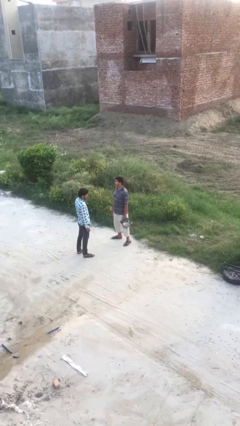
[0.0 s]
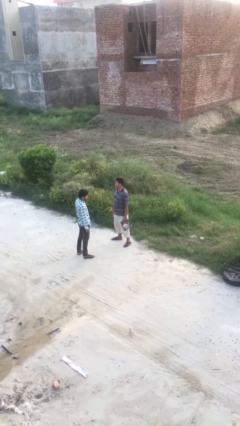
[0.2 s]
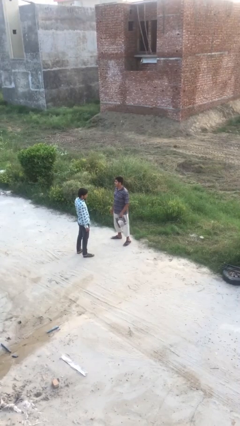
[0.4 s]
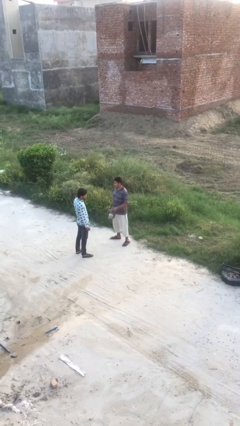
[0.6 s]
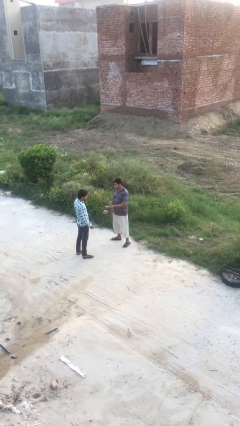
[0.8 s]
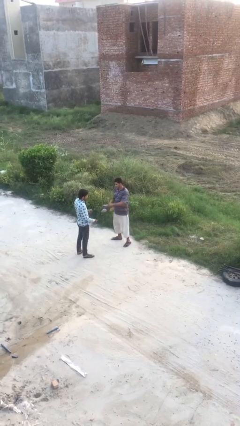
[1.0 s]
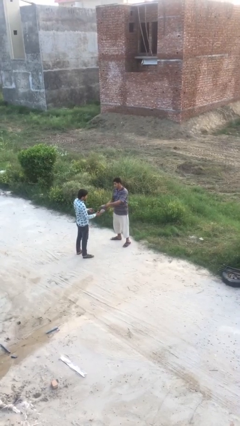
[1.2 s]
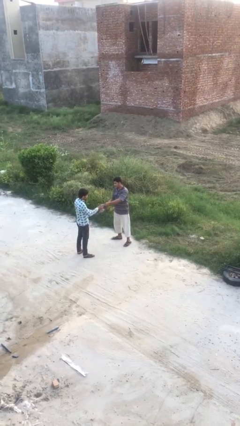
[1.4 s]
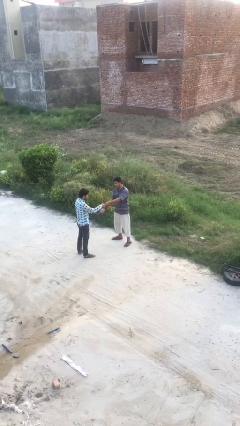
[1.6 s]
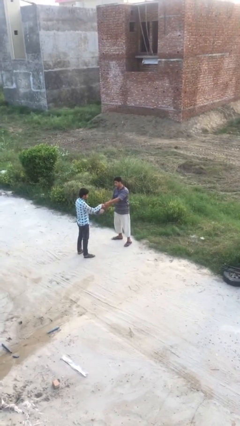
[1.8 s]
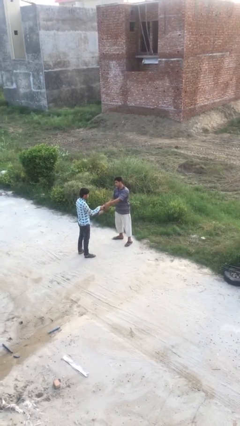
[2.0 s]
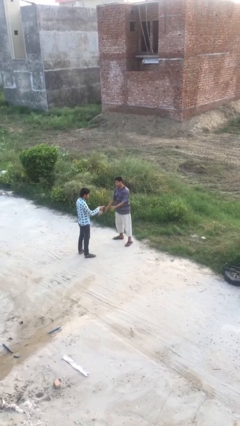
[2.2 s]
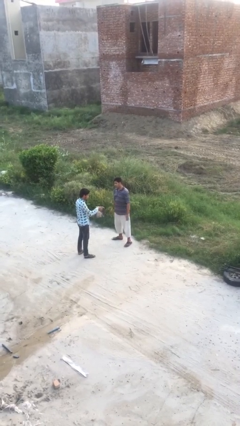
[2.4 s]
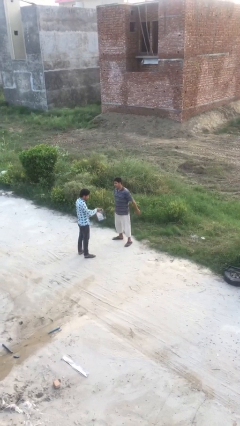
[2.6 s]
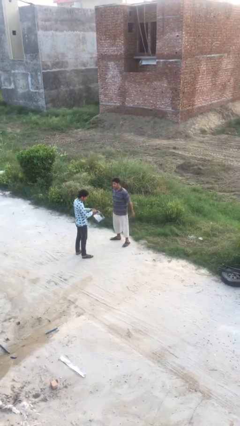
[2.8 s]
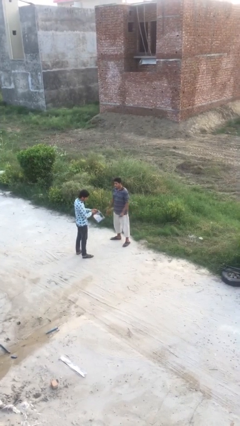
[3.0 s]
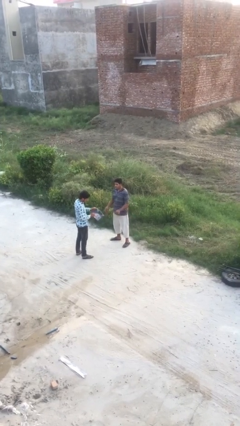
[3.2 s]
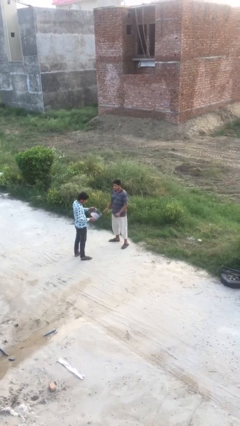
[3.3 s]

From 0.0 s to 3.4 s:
person transfers object to person

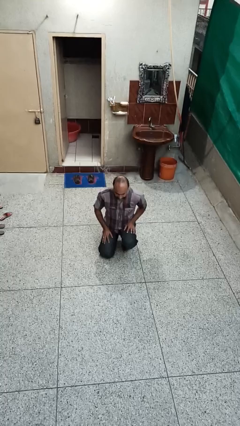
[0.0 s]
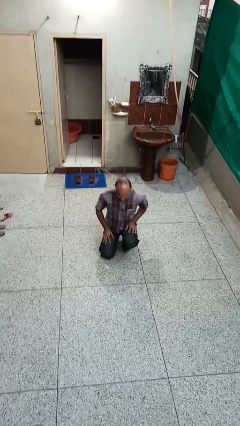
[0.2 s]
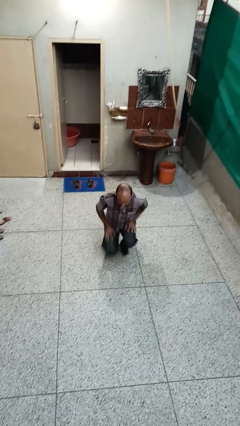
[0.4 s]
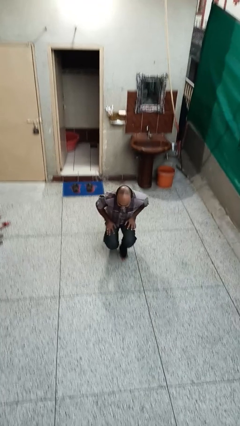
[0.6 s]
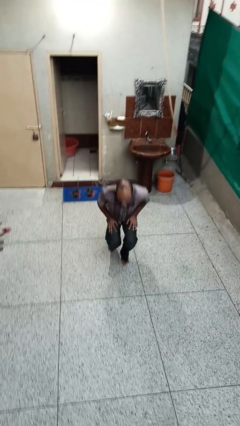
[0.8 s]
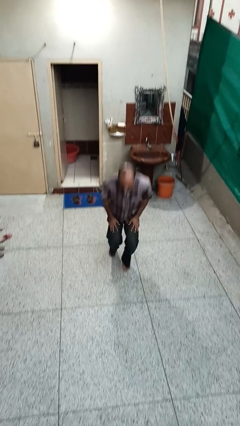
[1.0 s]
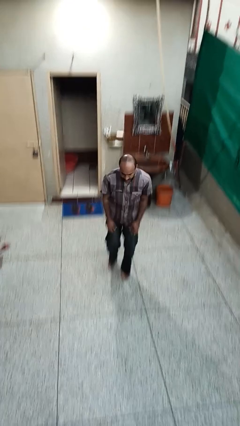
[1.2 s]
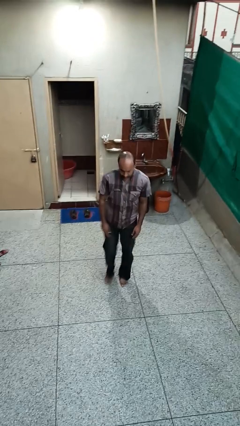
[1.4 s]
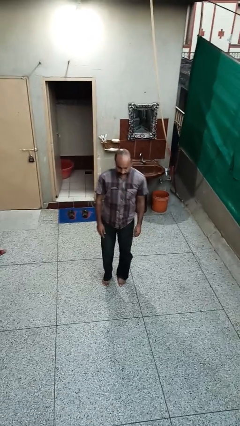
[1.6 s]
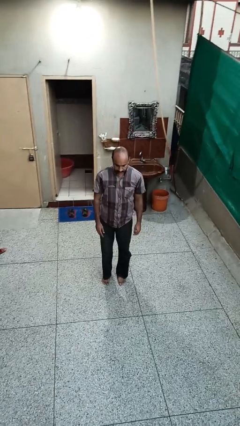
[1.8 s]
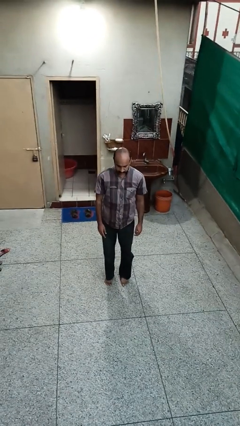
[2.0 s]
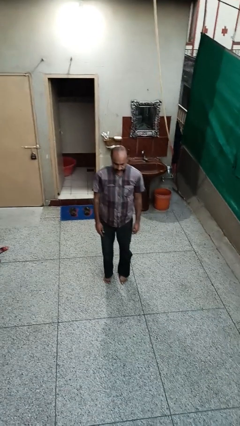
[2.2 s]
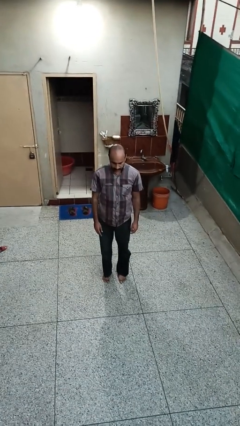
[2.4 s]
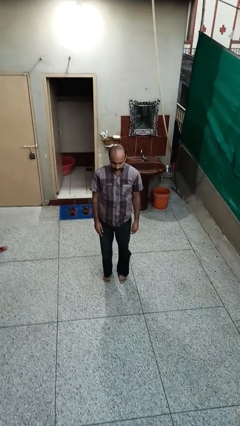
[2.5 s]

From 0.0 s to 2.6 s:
person stands up from floor

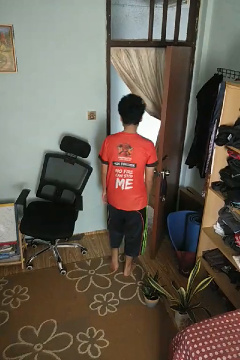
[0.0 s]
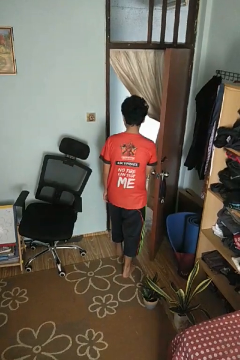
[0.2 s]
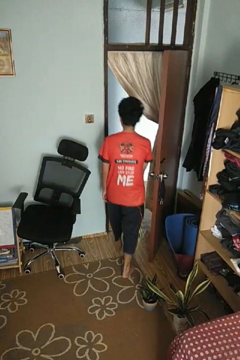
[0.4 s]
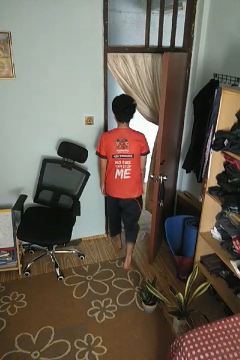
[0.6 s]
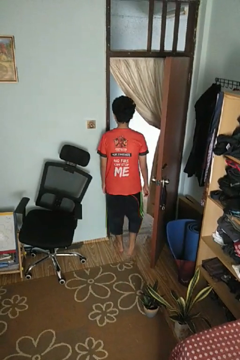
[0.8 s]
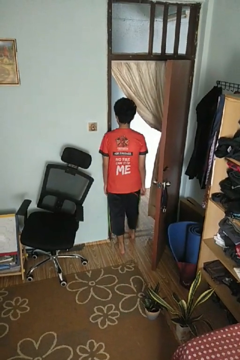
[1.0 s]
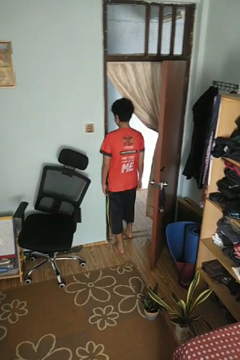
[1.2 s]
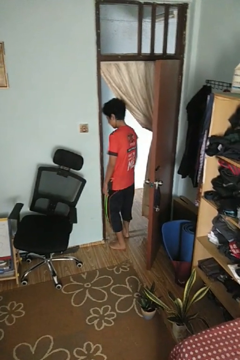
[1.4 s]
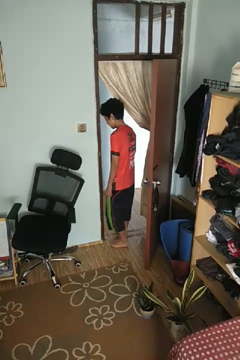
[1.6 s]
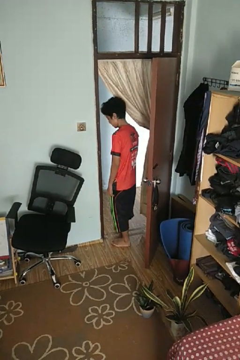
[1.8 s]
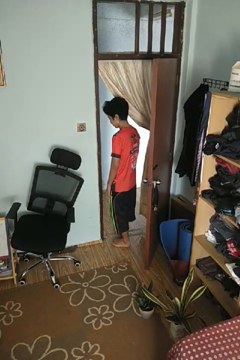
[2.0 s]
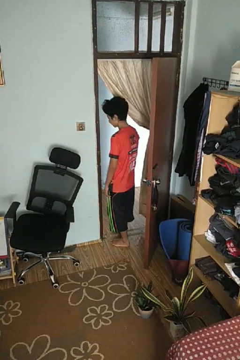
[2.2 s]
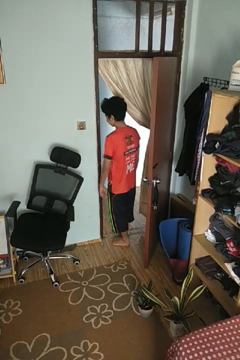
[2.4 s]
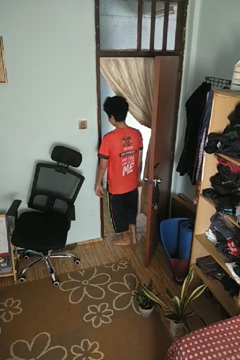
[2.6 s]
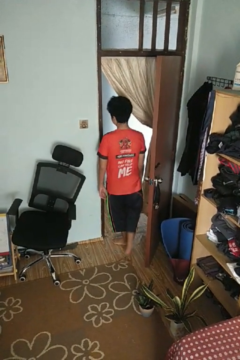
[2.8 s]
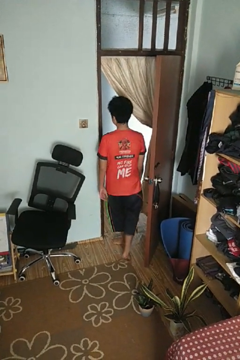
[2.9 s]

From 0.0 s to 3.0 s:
person bumps into wall

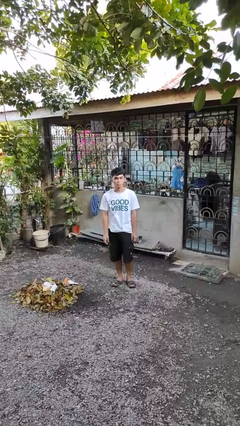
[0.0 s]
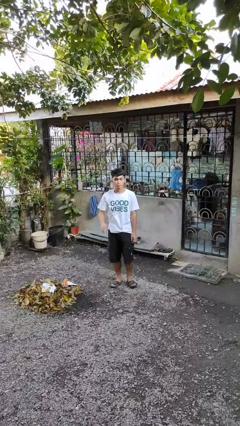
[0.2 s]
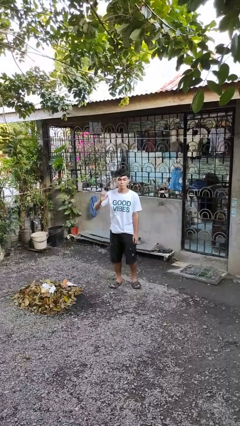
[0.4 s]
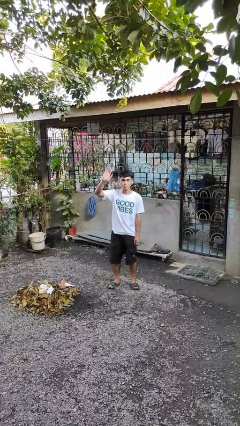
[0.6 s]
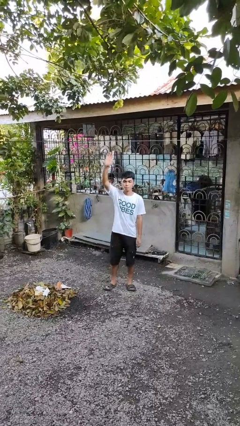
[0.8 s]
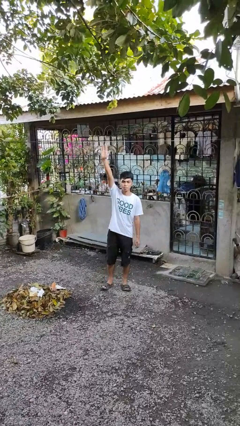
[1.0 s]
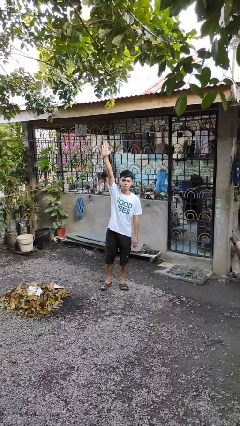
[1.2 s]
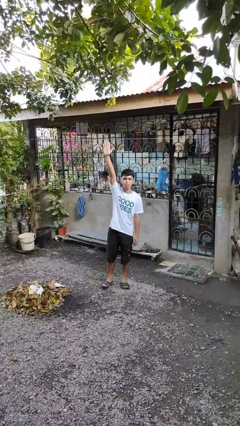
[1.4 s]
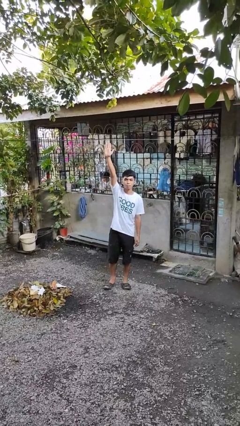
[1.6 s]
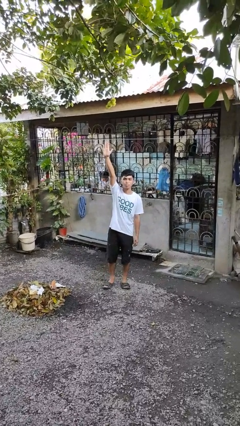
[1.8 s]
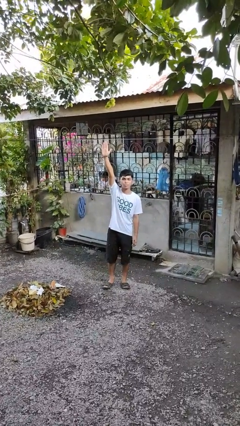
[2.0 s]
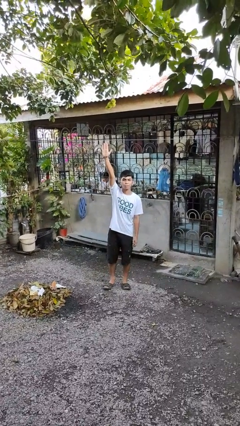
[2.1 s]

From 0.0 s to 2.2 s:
person gestures raise hand

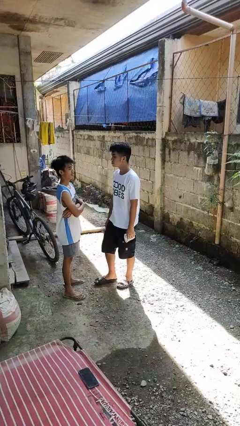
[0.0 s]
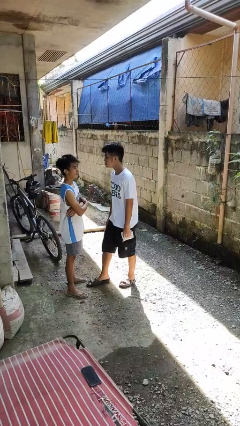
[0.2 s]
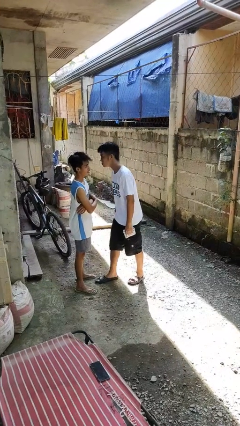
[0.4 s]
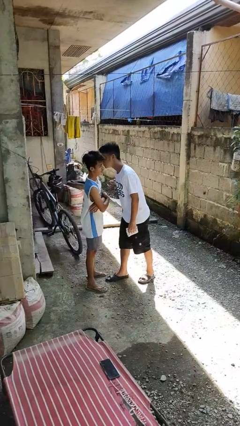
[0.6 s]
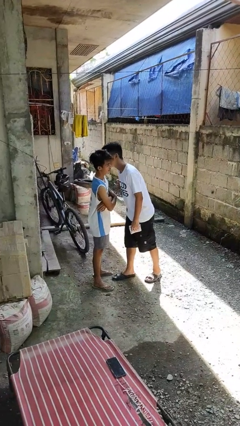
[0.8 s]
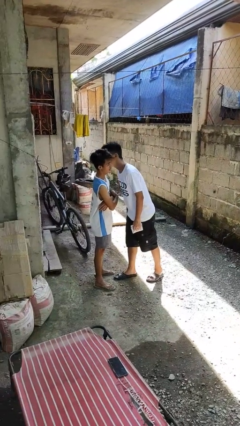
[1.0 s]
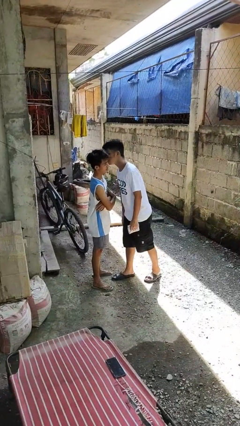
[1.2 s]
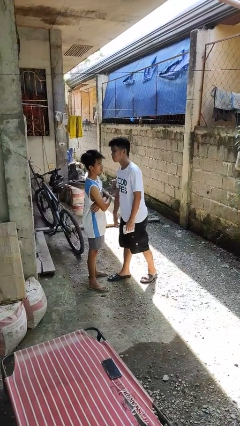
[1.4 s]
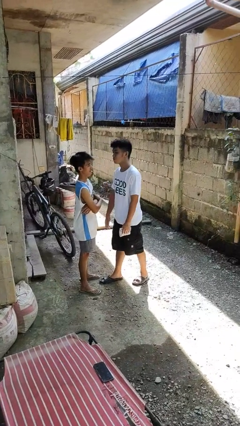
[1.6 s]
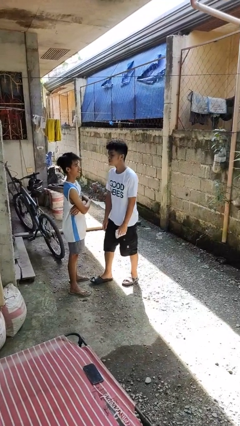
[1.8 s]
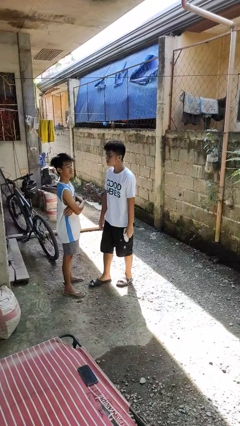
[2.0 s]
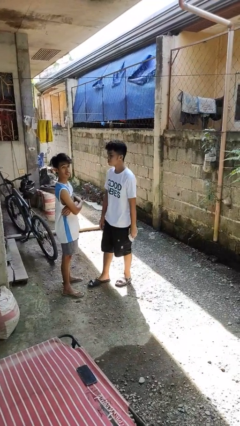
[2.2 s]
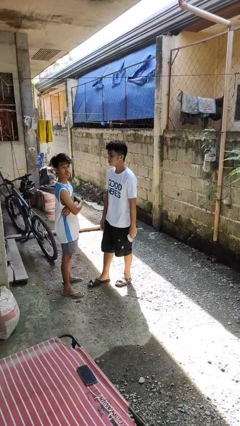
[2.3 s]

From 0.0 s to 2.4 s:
person kisses cheek of person

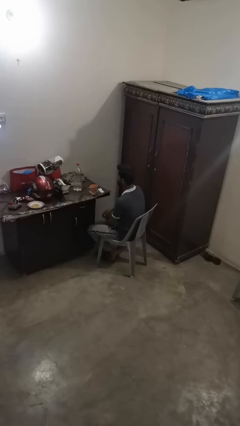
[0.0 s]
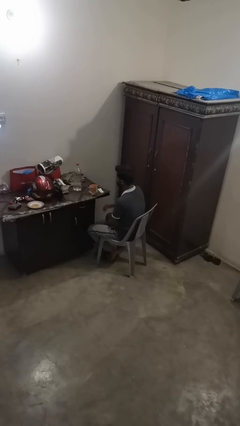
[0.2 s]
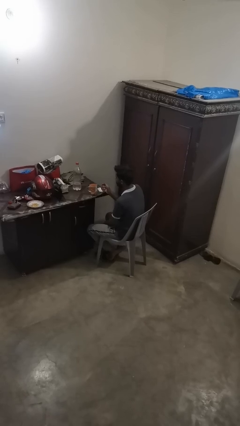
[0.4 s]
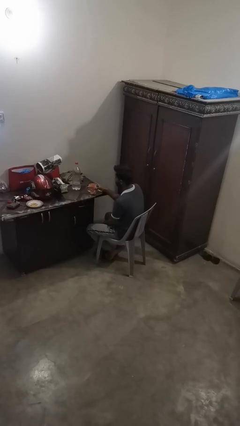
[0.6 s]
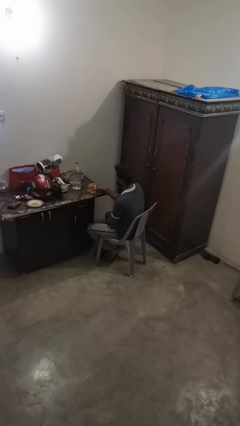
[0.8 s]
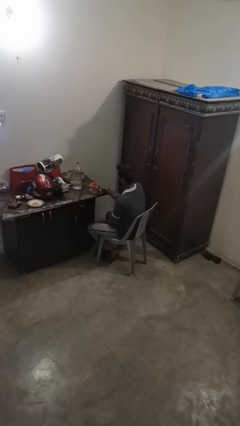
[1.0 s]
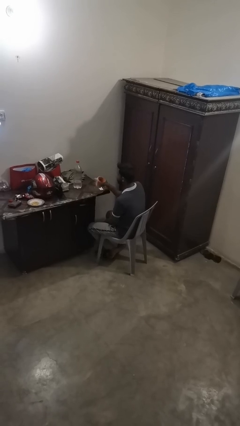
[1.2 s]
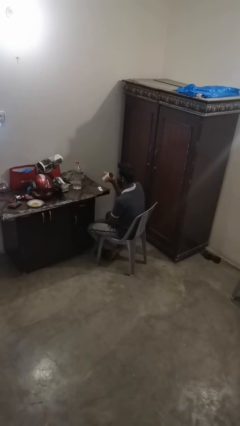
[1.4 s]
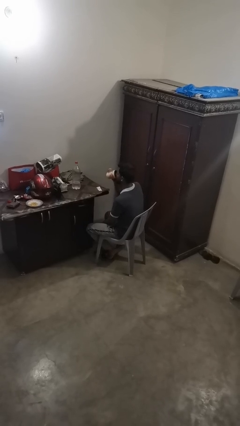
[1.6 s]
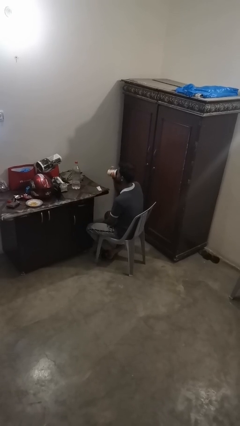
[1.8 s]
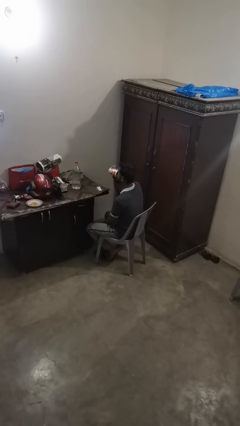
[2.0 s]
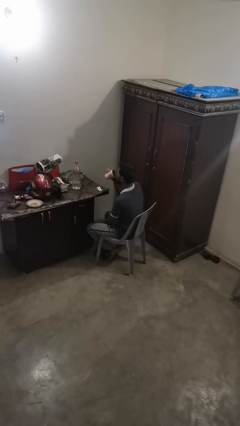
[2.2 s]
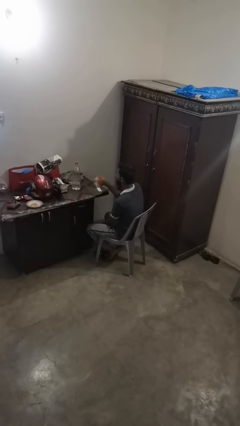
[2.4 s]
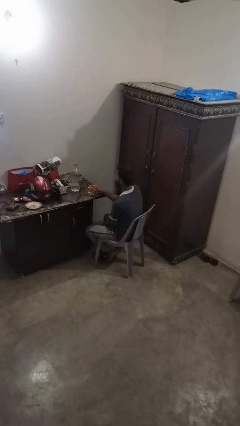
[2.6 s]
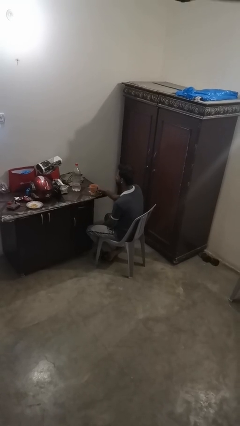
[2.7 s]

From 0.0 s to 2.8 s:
person drinks from cup

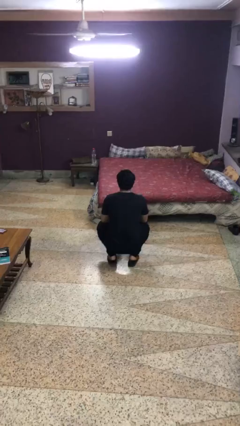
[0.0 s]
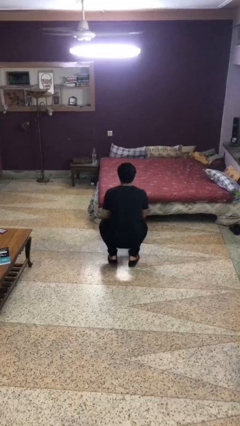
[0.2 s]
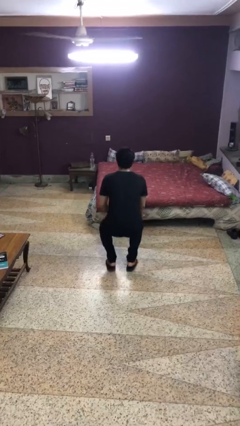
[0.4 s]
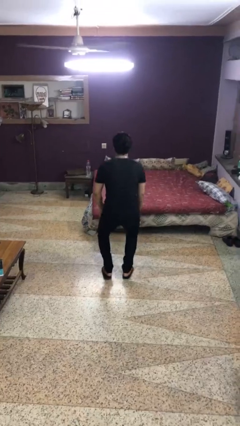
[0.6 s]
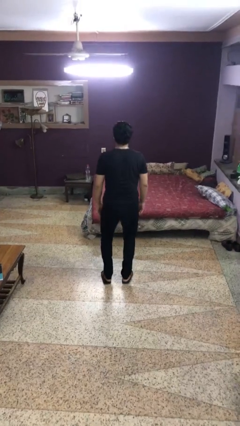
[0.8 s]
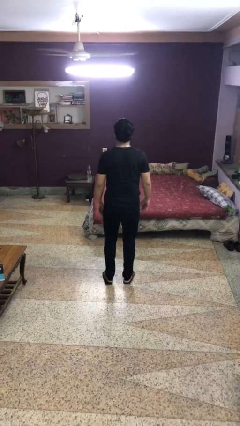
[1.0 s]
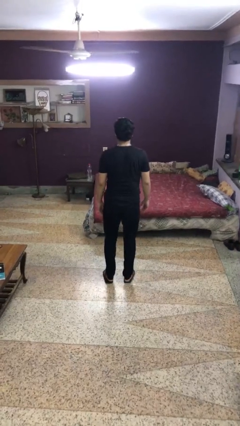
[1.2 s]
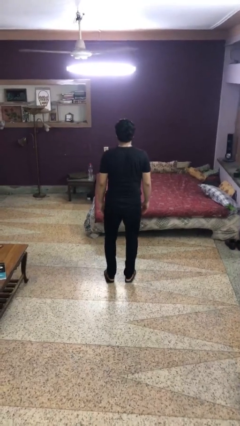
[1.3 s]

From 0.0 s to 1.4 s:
person exercises with situp
